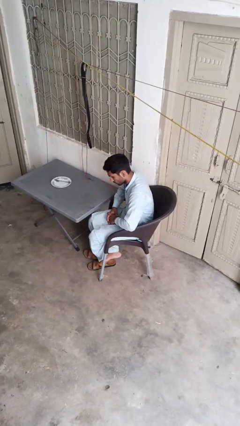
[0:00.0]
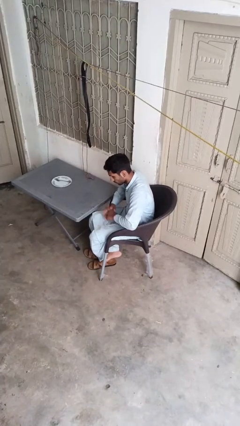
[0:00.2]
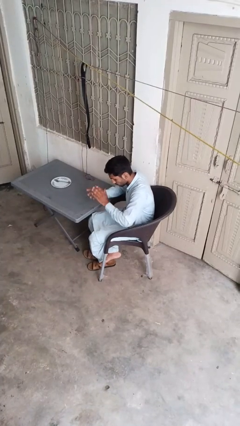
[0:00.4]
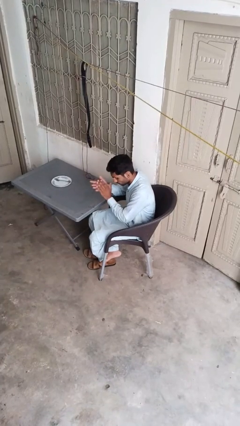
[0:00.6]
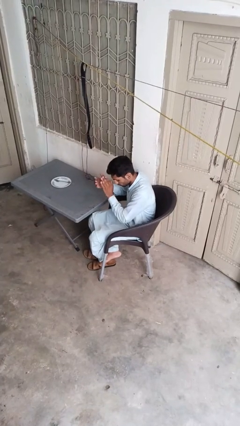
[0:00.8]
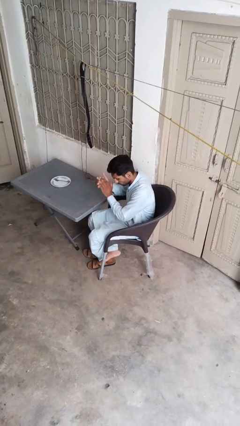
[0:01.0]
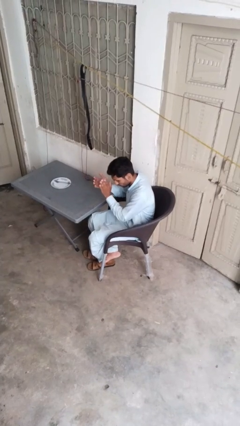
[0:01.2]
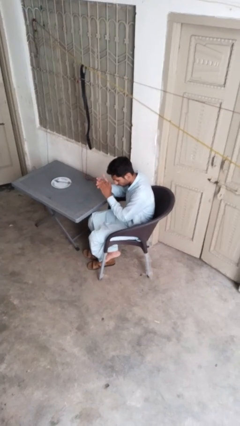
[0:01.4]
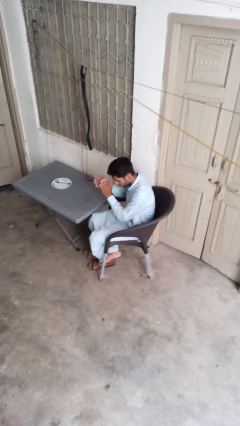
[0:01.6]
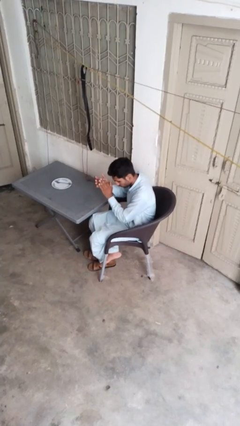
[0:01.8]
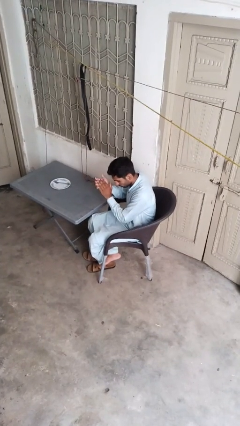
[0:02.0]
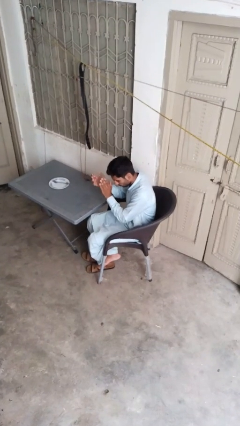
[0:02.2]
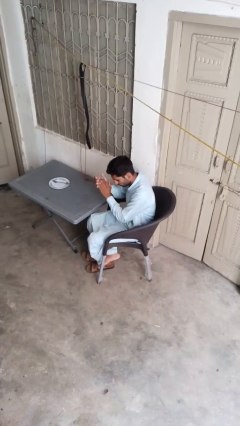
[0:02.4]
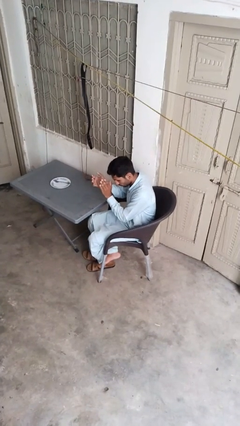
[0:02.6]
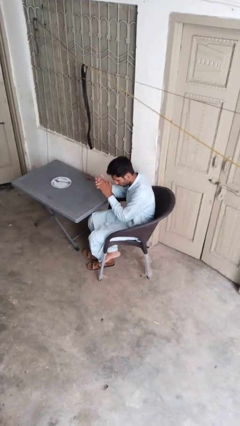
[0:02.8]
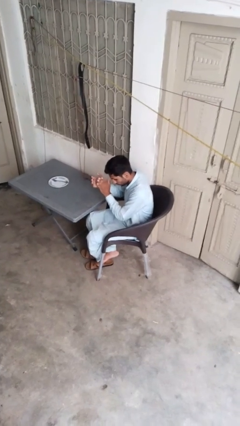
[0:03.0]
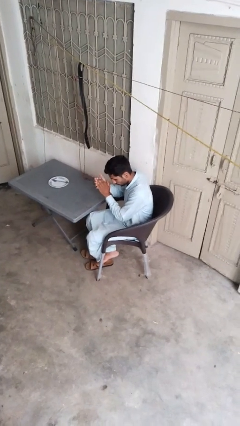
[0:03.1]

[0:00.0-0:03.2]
person claps hands

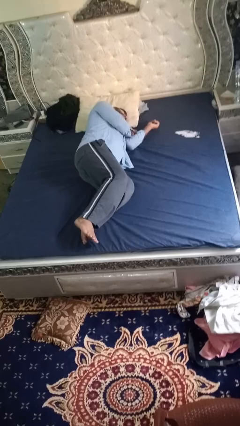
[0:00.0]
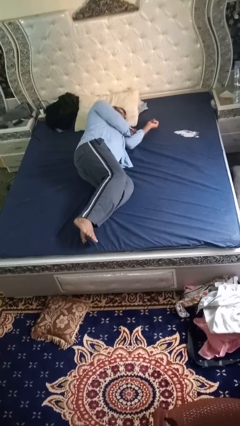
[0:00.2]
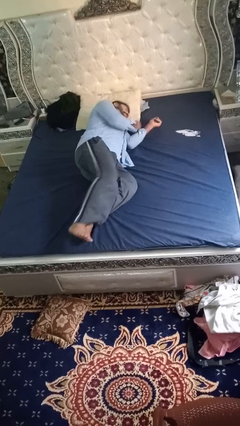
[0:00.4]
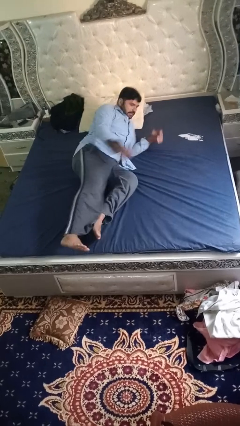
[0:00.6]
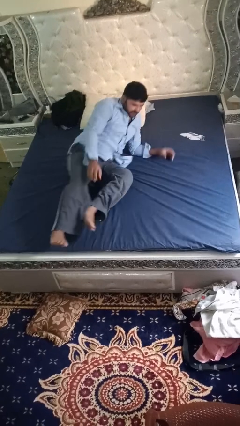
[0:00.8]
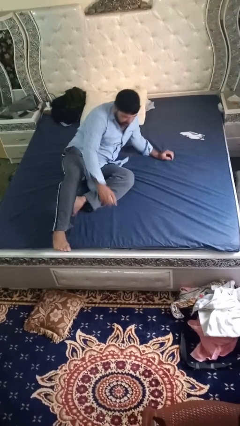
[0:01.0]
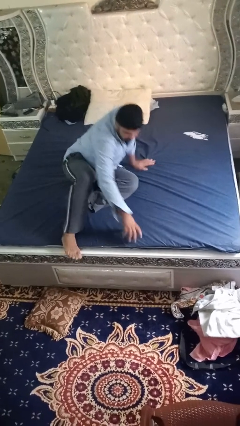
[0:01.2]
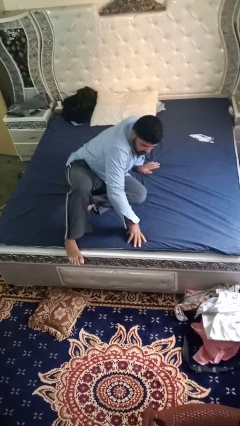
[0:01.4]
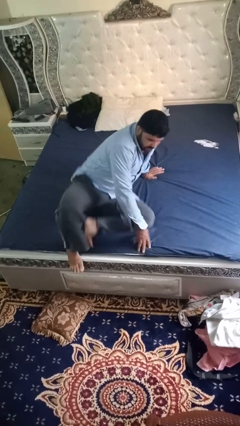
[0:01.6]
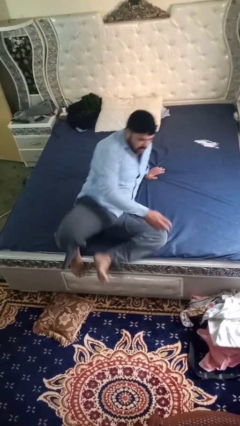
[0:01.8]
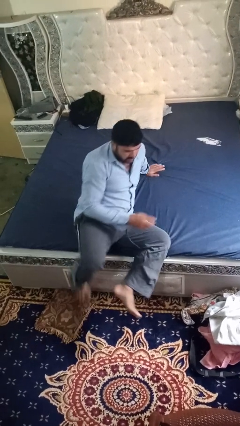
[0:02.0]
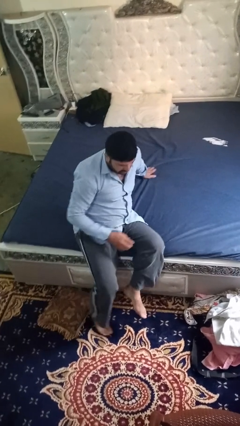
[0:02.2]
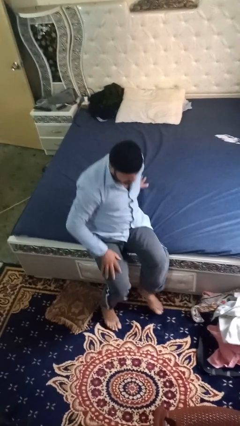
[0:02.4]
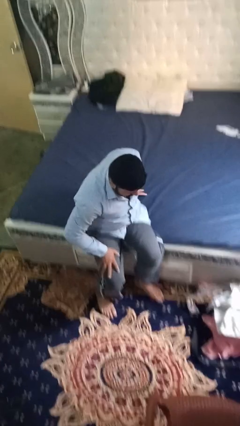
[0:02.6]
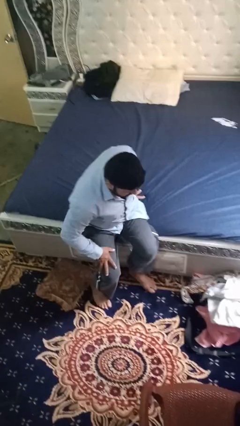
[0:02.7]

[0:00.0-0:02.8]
person stands up

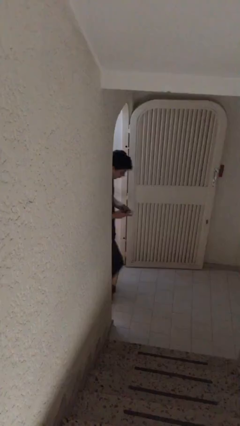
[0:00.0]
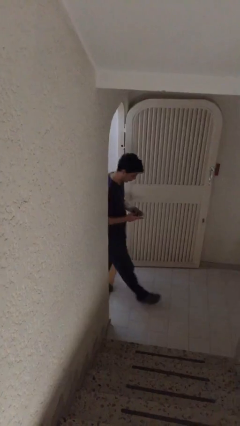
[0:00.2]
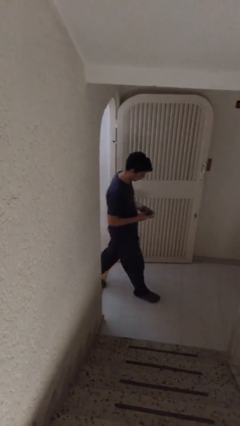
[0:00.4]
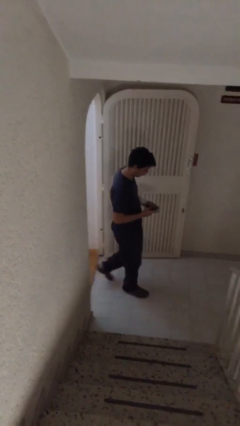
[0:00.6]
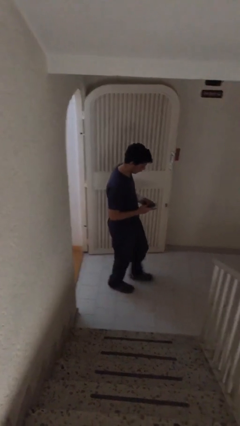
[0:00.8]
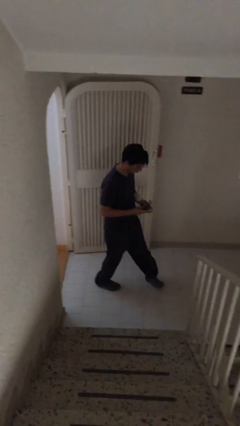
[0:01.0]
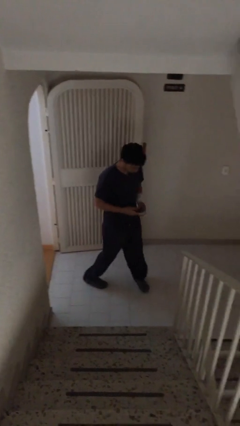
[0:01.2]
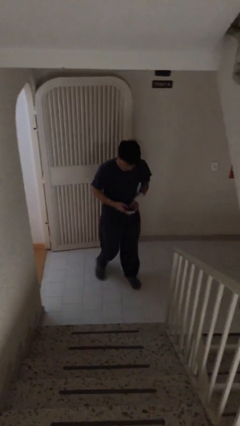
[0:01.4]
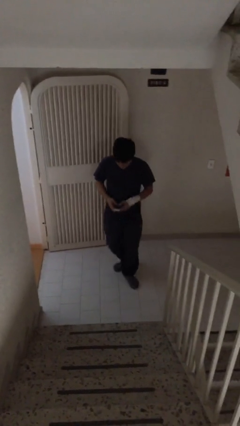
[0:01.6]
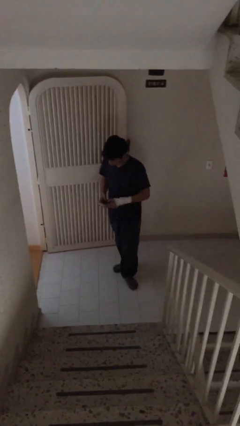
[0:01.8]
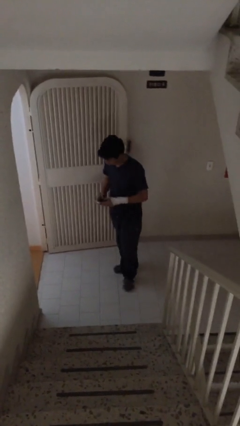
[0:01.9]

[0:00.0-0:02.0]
person enters scene through structure

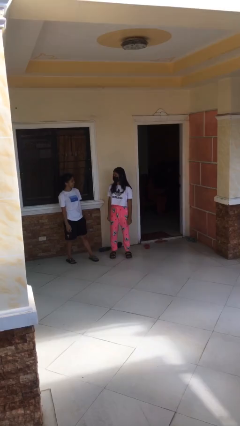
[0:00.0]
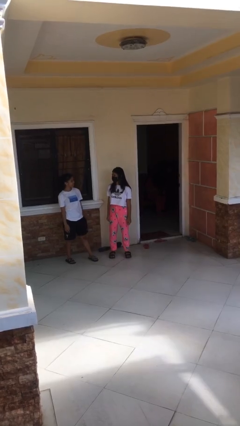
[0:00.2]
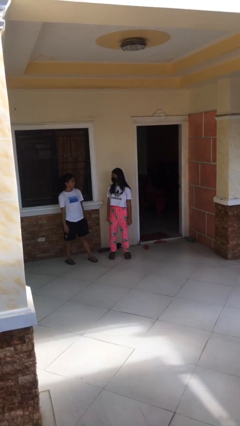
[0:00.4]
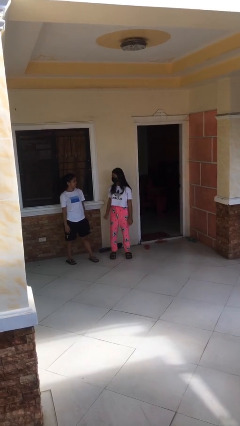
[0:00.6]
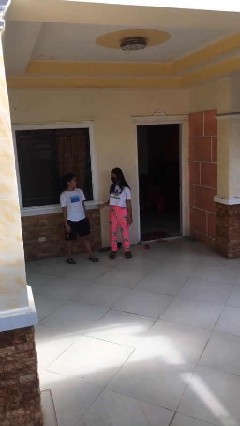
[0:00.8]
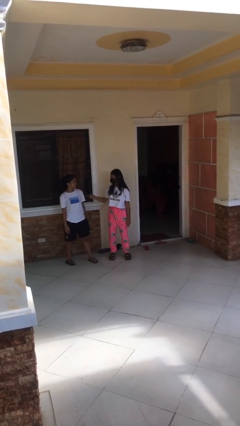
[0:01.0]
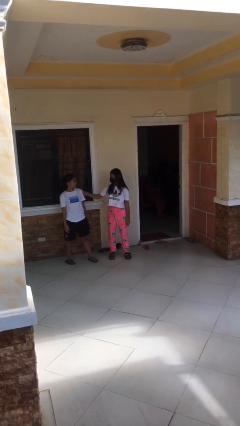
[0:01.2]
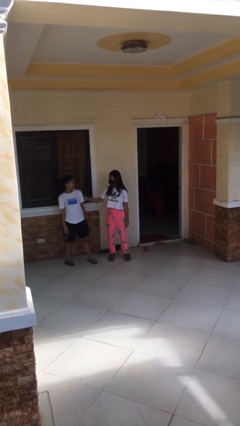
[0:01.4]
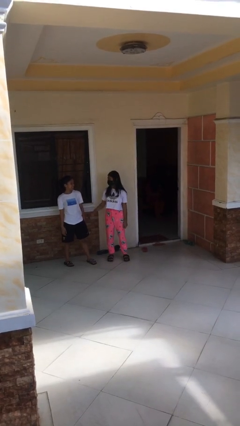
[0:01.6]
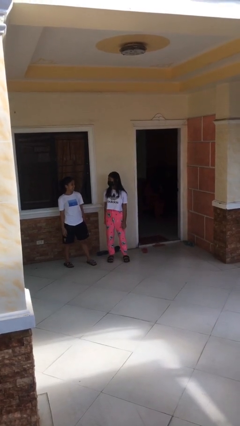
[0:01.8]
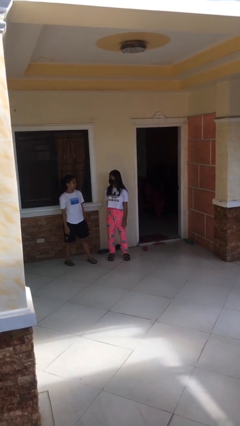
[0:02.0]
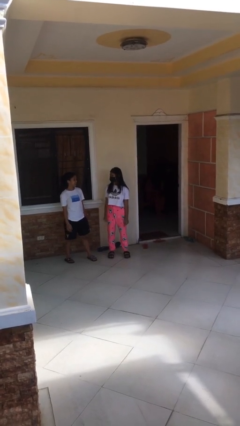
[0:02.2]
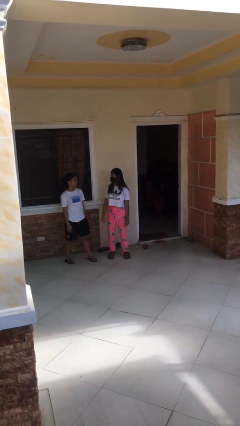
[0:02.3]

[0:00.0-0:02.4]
person pounds shoulders of person

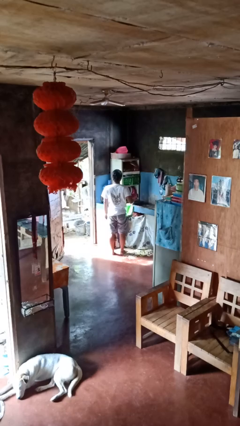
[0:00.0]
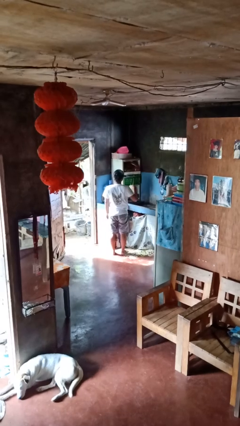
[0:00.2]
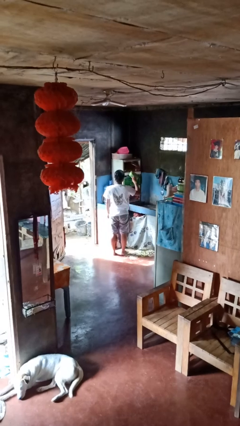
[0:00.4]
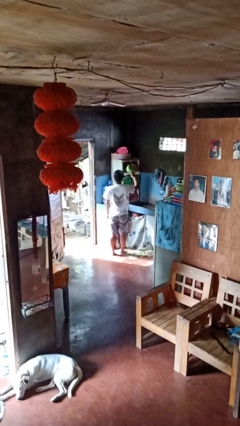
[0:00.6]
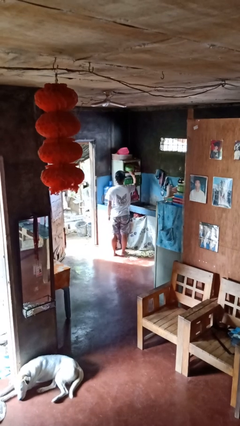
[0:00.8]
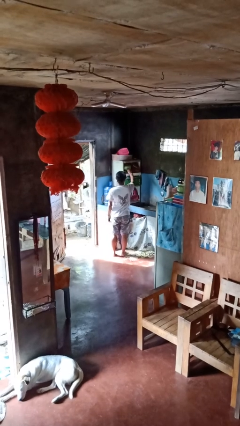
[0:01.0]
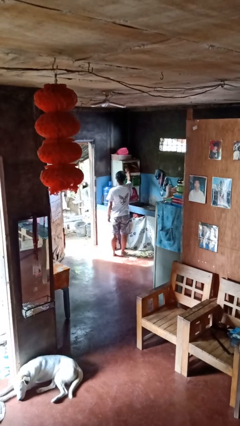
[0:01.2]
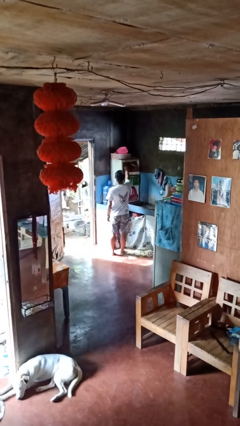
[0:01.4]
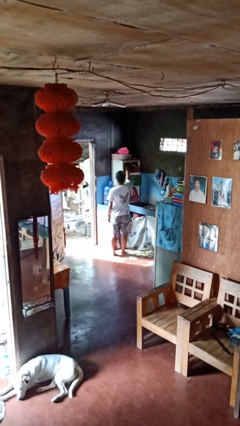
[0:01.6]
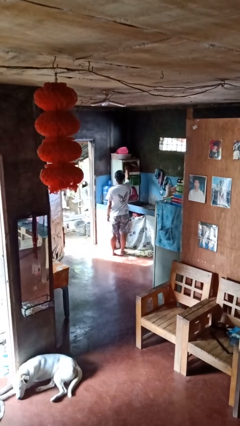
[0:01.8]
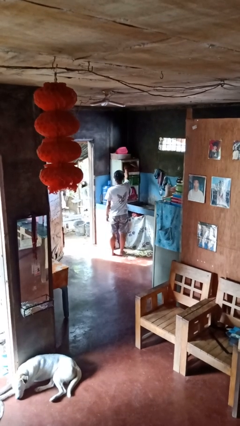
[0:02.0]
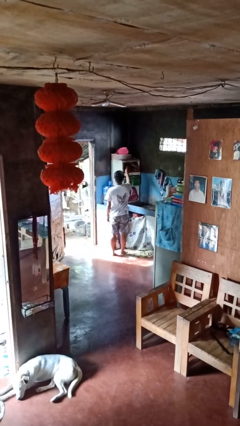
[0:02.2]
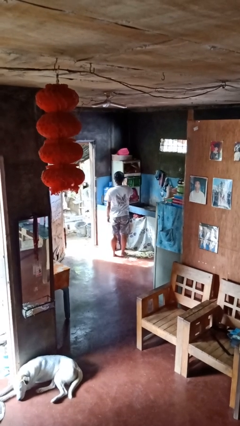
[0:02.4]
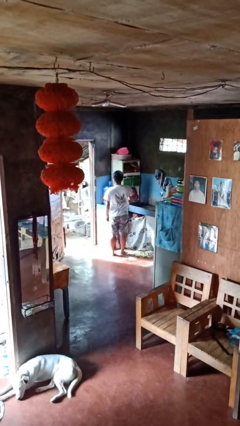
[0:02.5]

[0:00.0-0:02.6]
person puts object in cabinet

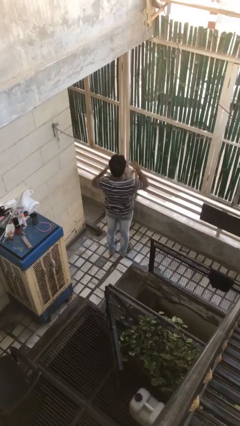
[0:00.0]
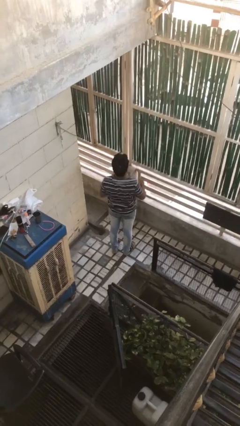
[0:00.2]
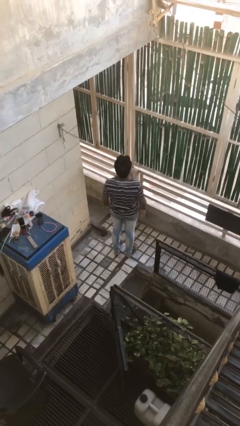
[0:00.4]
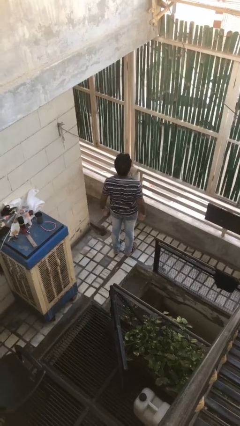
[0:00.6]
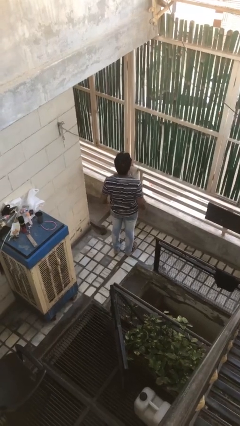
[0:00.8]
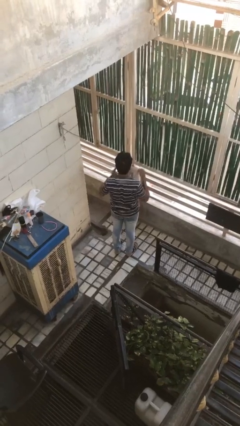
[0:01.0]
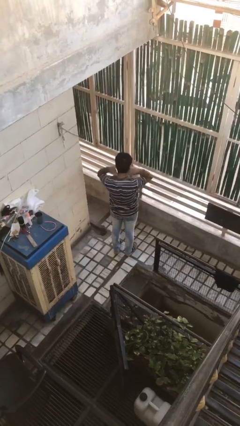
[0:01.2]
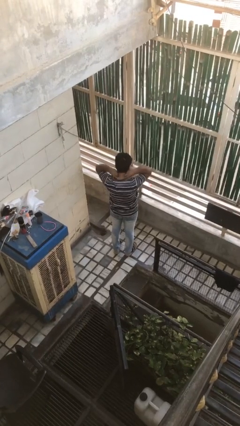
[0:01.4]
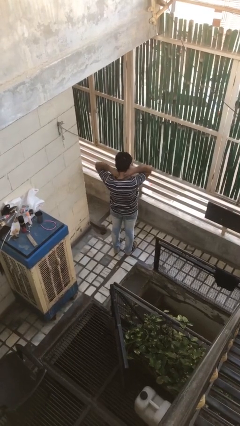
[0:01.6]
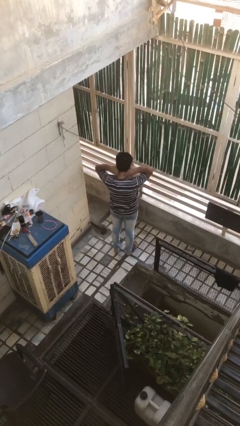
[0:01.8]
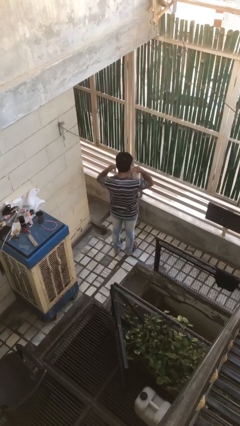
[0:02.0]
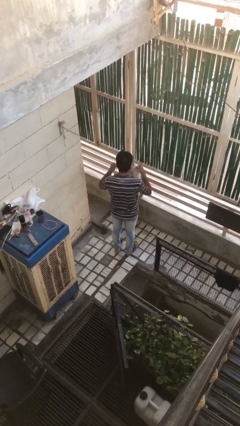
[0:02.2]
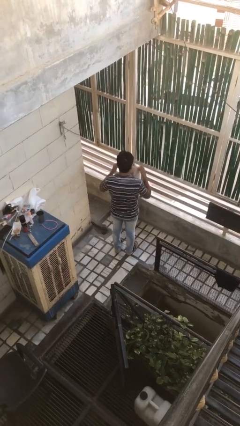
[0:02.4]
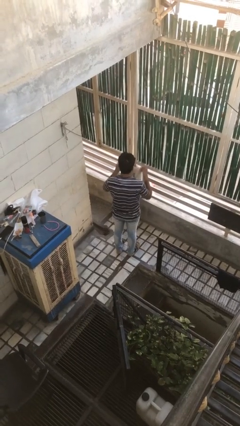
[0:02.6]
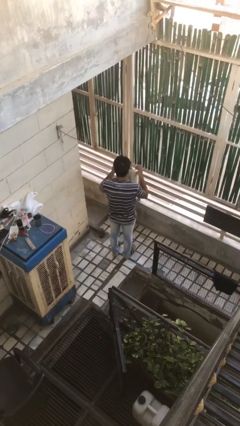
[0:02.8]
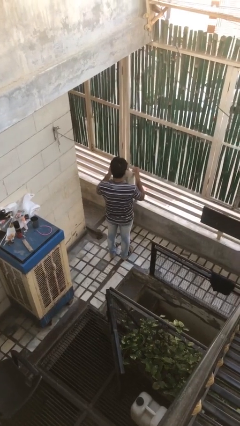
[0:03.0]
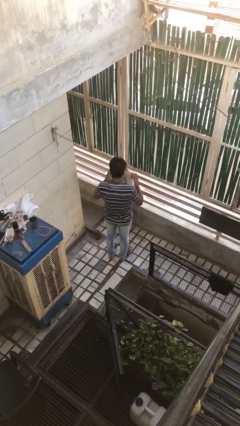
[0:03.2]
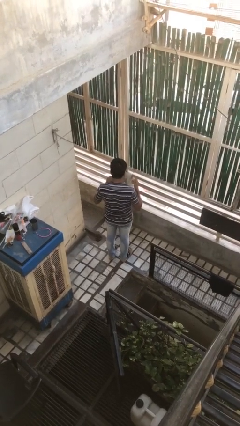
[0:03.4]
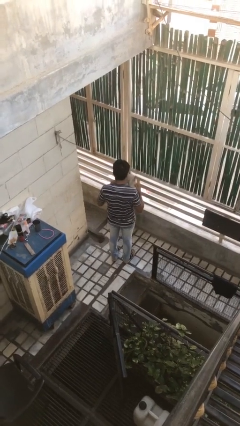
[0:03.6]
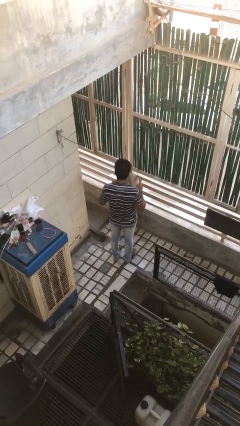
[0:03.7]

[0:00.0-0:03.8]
person takes off necklace

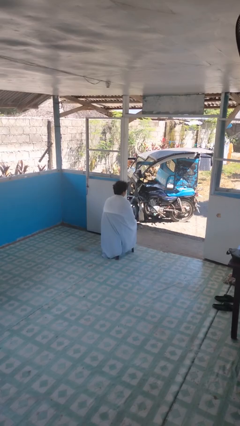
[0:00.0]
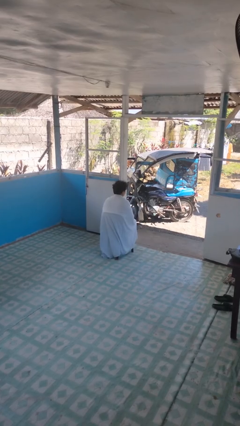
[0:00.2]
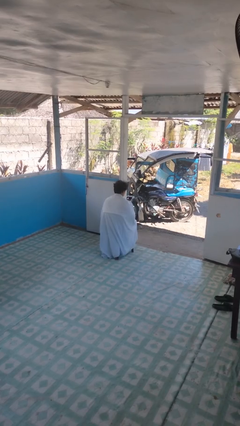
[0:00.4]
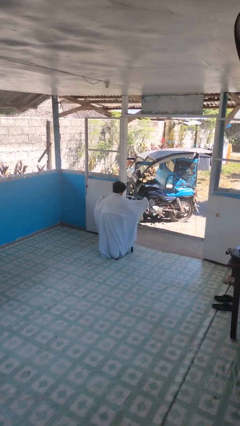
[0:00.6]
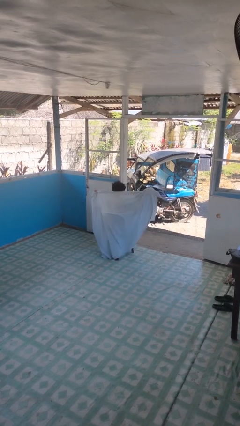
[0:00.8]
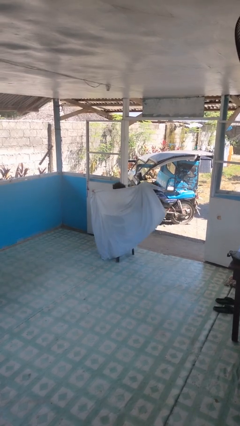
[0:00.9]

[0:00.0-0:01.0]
person uncovers with blanket
